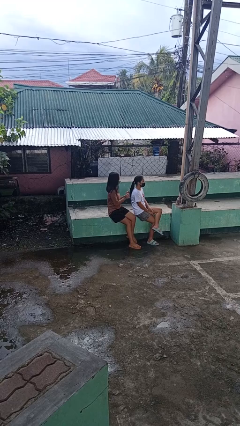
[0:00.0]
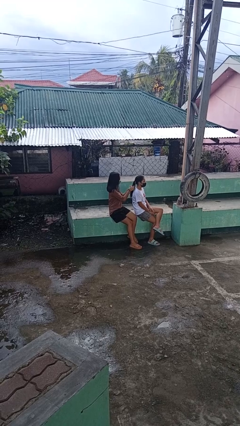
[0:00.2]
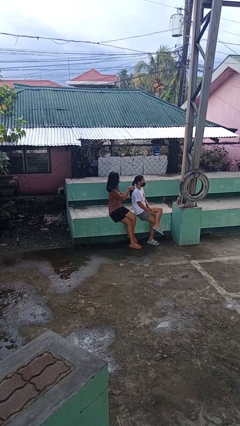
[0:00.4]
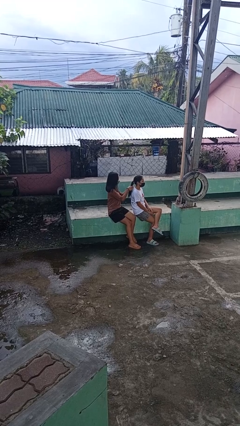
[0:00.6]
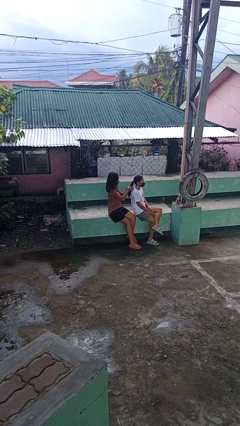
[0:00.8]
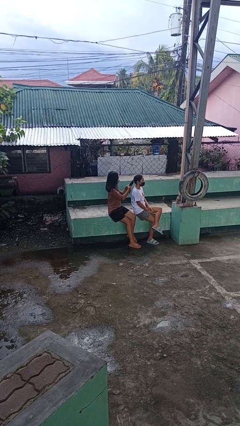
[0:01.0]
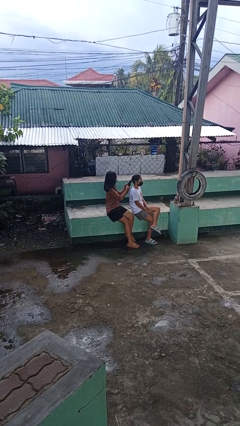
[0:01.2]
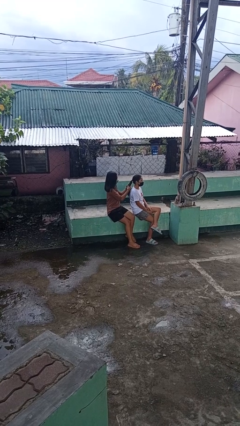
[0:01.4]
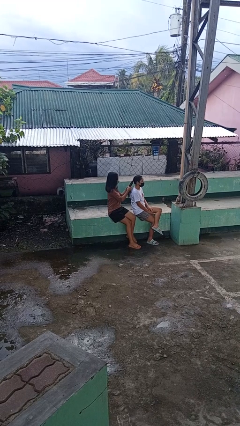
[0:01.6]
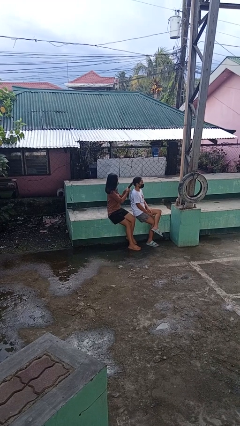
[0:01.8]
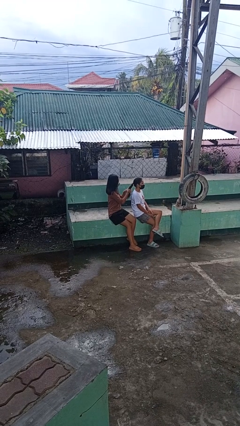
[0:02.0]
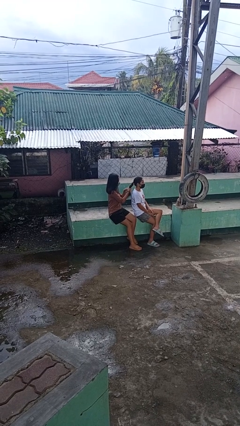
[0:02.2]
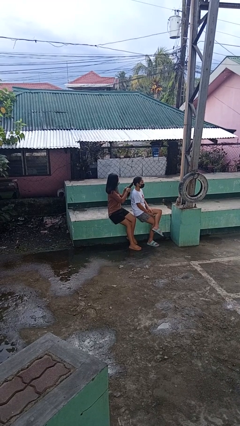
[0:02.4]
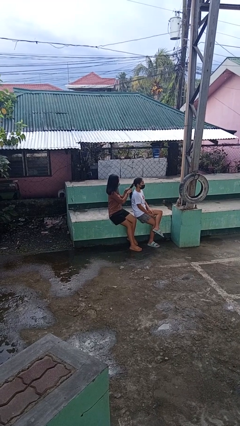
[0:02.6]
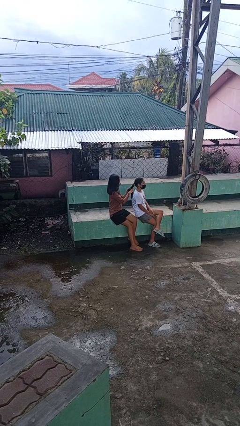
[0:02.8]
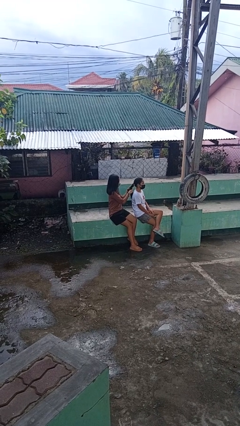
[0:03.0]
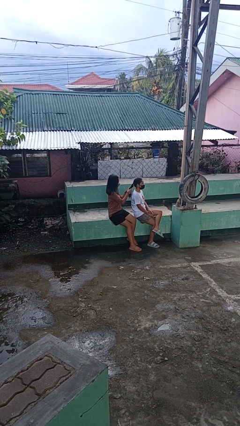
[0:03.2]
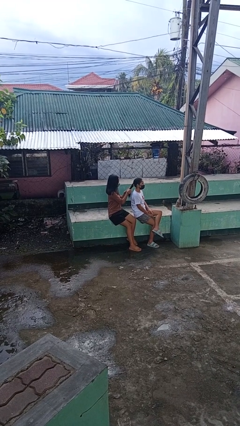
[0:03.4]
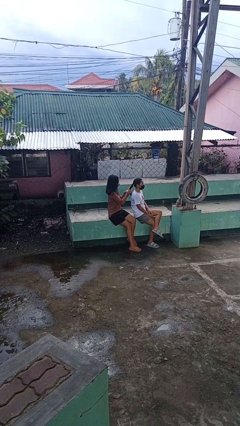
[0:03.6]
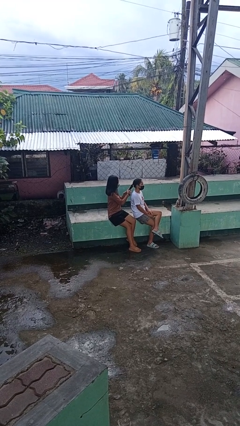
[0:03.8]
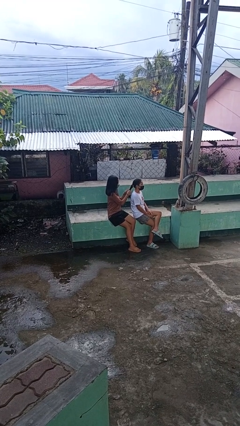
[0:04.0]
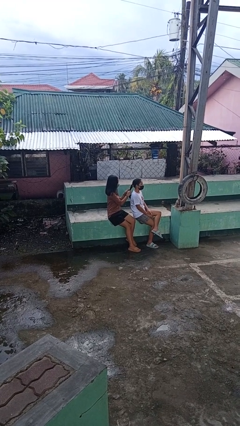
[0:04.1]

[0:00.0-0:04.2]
person braids hair of person

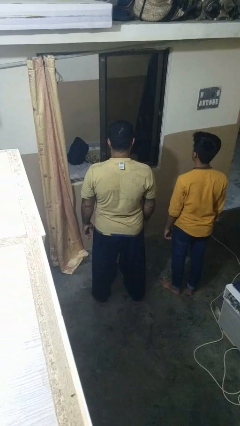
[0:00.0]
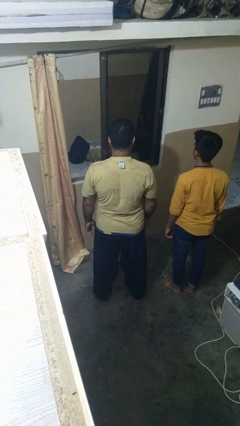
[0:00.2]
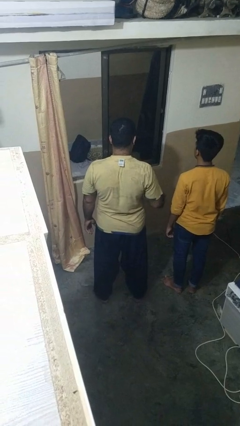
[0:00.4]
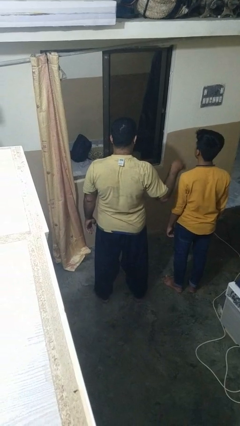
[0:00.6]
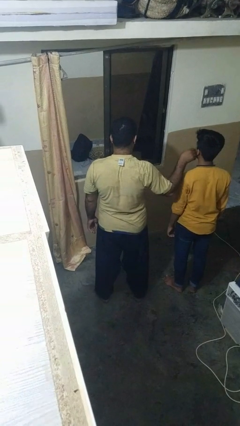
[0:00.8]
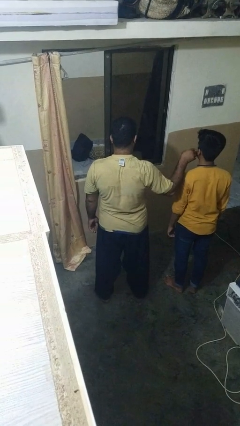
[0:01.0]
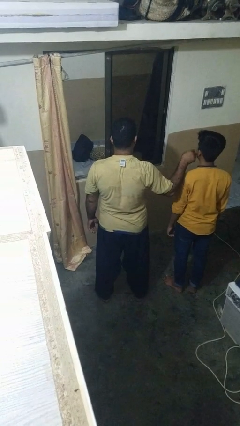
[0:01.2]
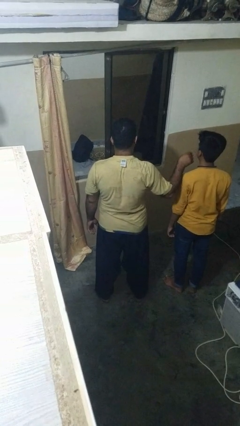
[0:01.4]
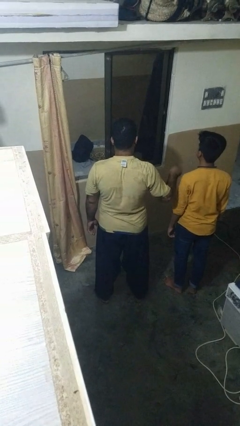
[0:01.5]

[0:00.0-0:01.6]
person touches face of person

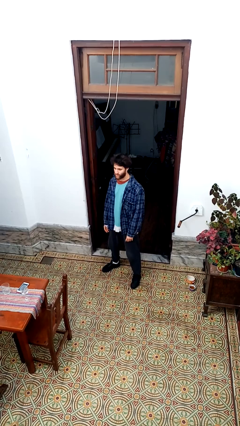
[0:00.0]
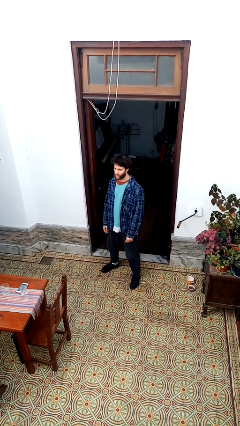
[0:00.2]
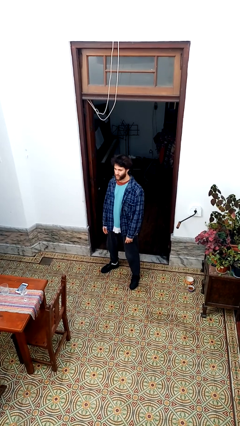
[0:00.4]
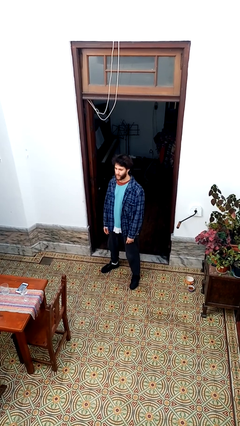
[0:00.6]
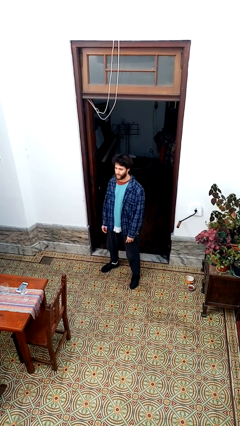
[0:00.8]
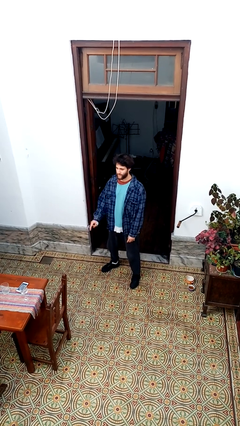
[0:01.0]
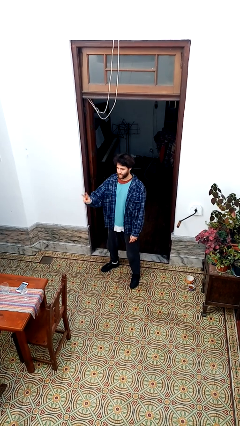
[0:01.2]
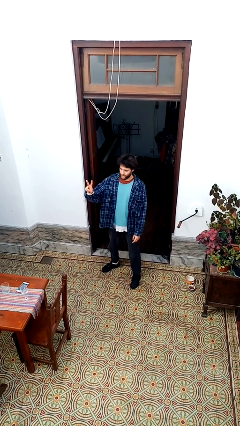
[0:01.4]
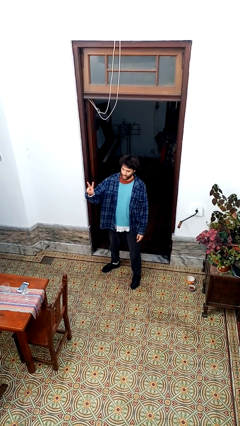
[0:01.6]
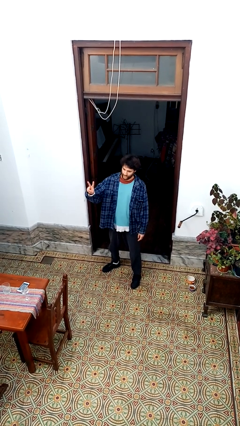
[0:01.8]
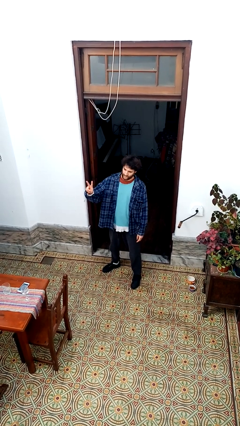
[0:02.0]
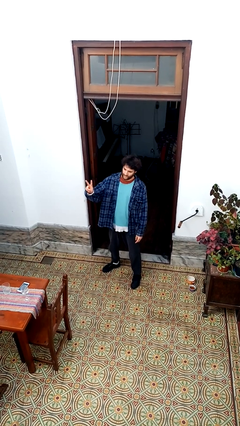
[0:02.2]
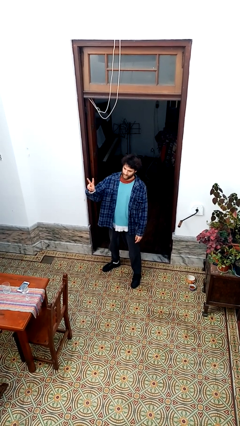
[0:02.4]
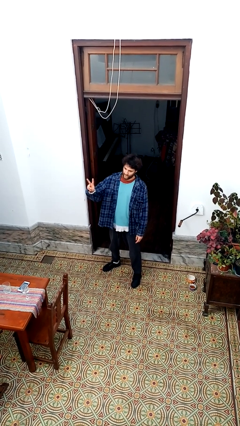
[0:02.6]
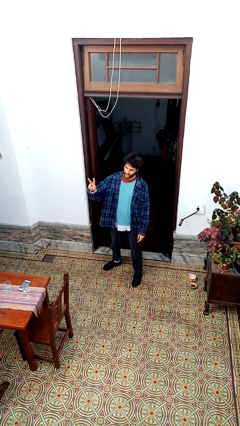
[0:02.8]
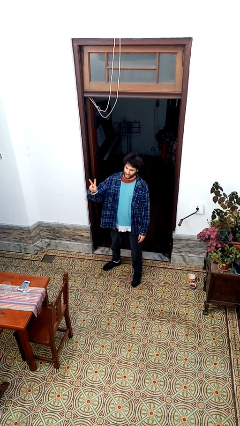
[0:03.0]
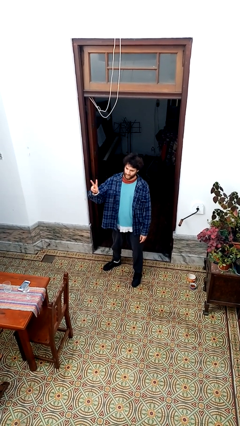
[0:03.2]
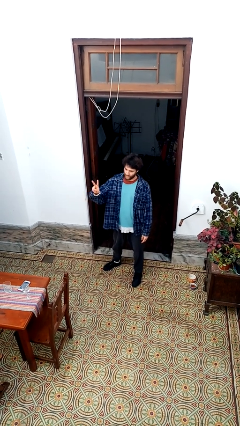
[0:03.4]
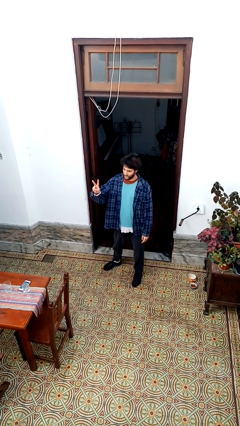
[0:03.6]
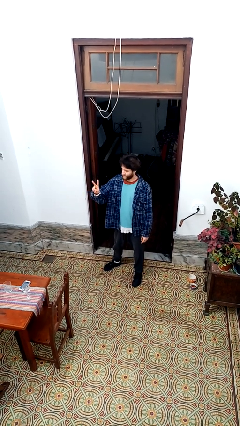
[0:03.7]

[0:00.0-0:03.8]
person gestures peace

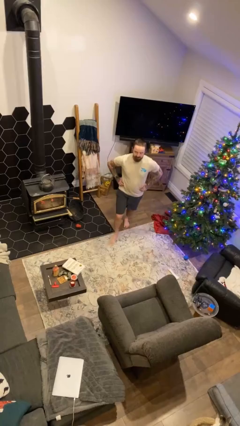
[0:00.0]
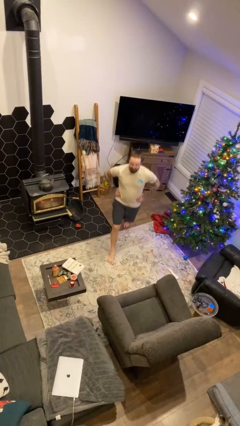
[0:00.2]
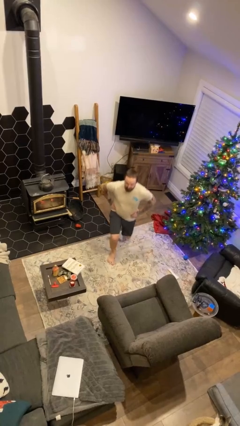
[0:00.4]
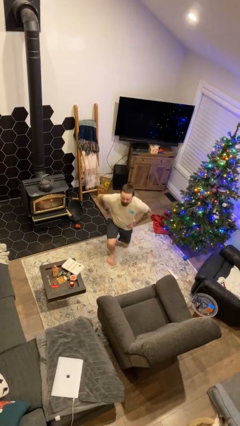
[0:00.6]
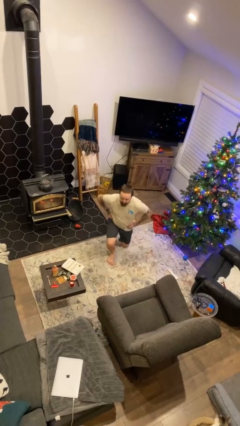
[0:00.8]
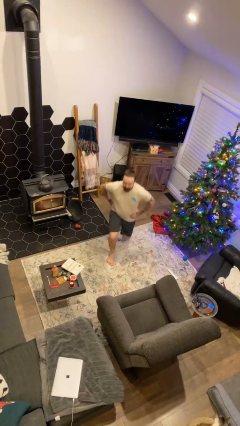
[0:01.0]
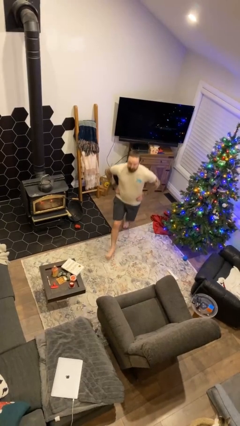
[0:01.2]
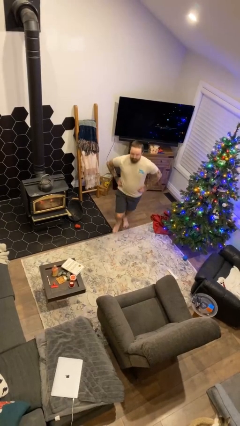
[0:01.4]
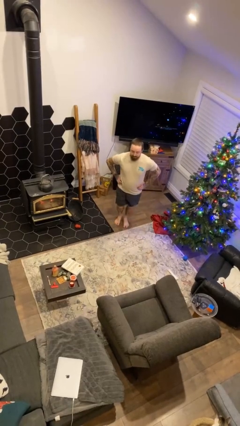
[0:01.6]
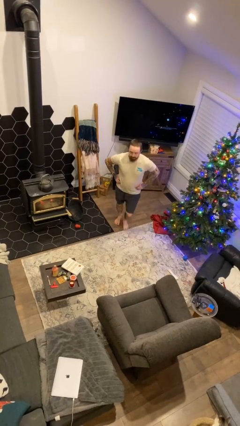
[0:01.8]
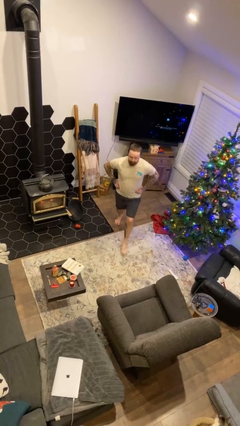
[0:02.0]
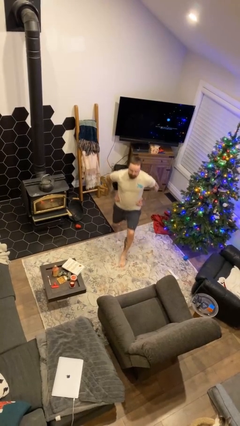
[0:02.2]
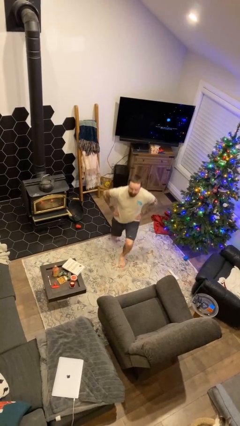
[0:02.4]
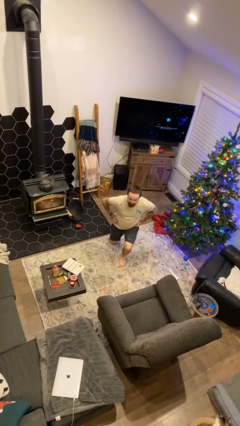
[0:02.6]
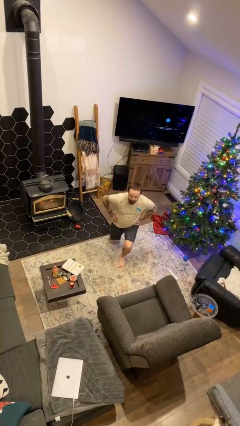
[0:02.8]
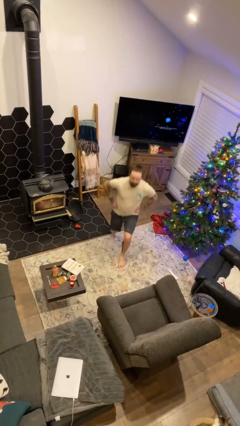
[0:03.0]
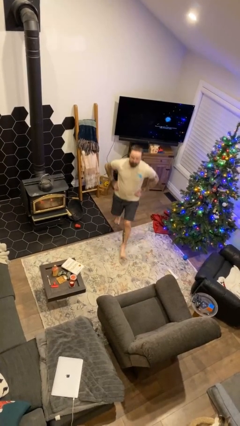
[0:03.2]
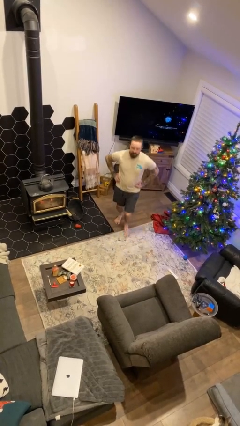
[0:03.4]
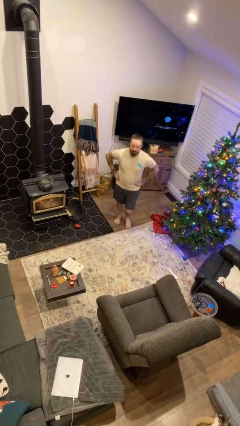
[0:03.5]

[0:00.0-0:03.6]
person exercises with lunges

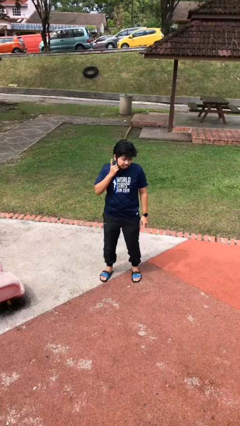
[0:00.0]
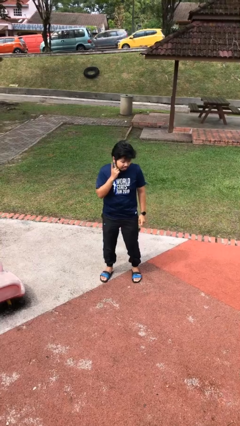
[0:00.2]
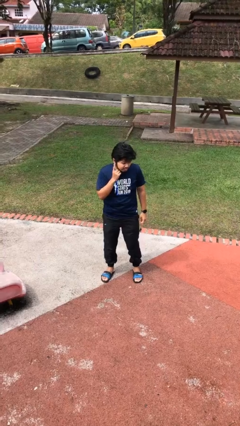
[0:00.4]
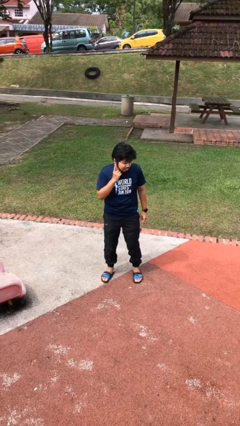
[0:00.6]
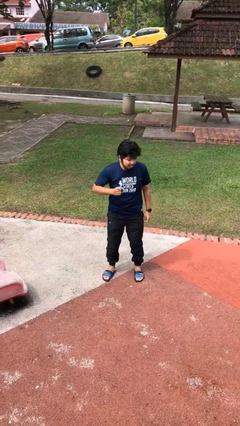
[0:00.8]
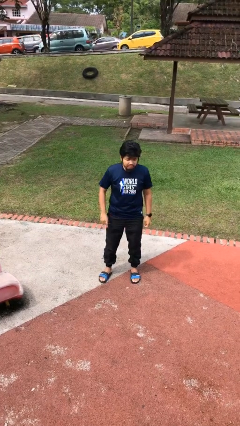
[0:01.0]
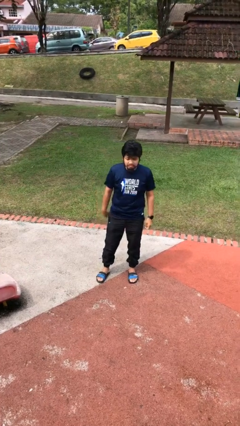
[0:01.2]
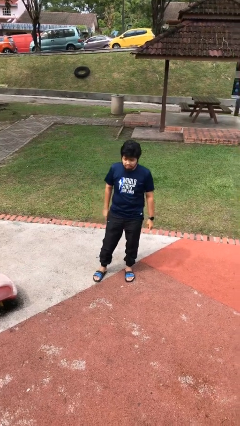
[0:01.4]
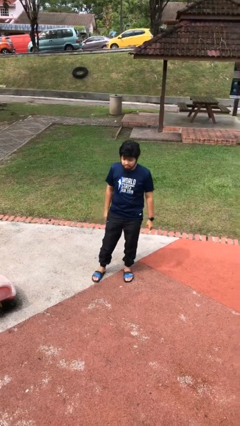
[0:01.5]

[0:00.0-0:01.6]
person gestures listen closely

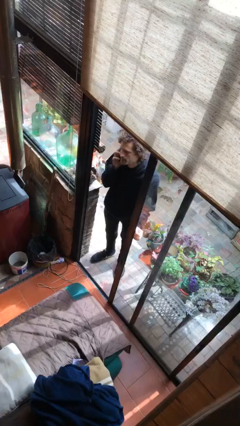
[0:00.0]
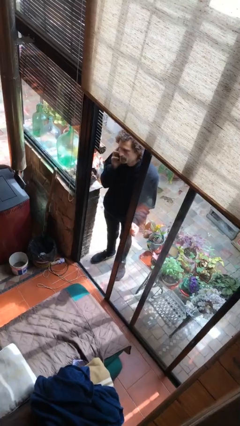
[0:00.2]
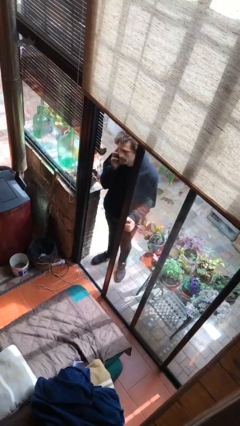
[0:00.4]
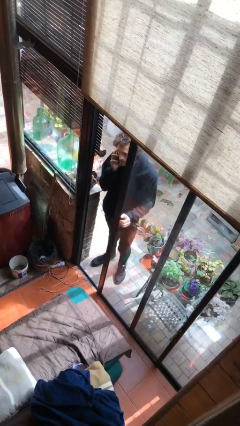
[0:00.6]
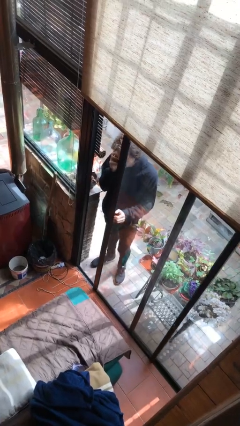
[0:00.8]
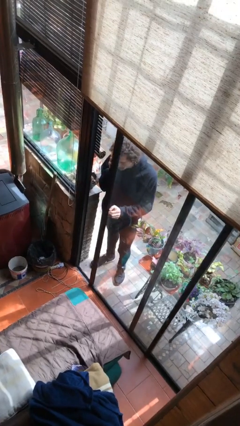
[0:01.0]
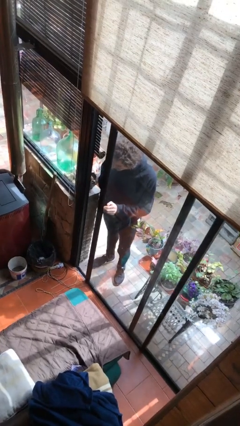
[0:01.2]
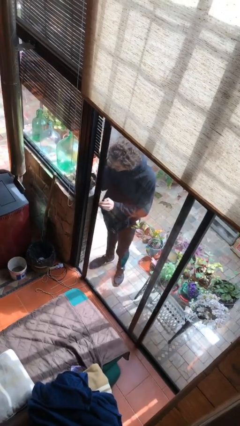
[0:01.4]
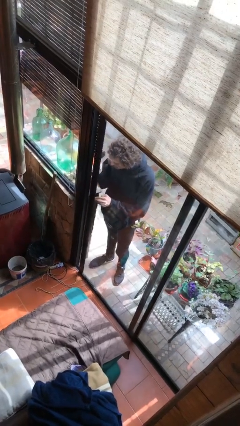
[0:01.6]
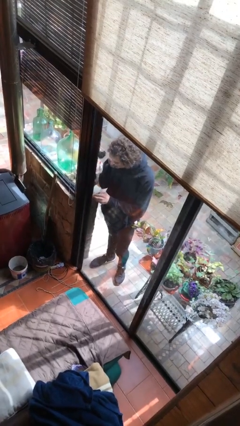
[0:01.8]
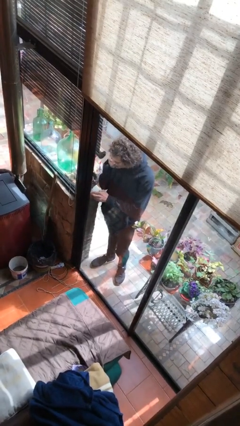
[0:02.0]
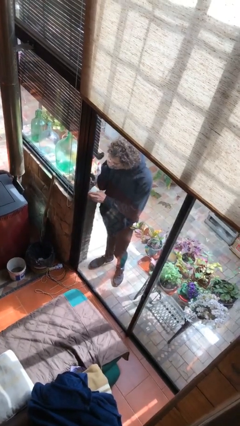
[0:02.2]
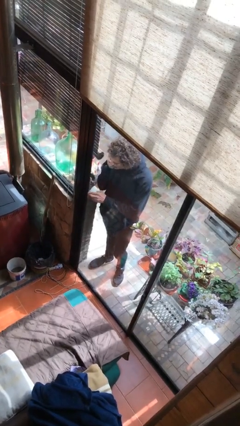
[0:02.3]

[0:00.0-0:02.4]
person closes facility door

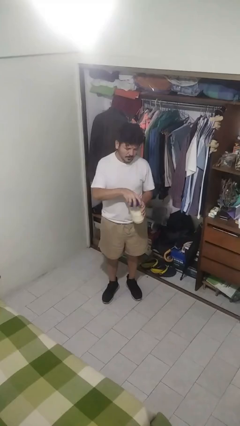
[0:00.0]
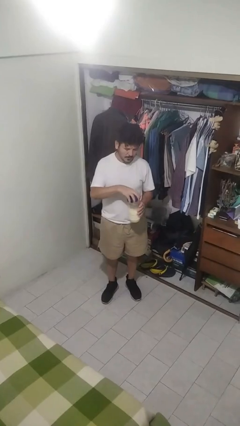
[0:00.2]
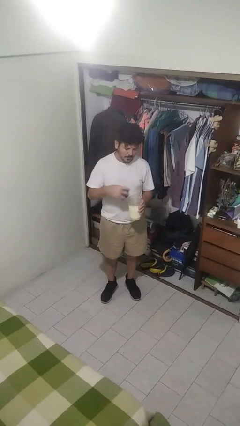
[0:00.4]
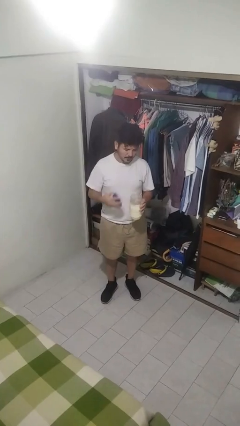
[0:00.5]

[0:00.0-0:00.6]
person opens jar
